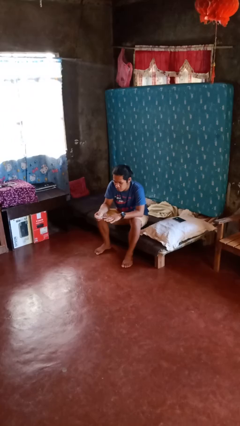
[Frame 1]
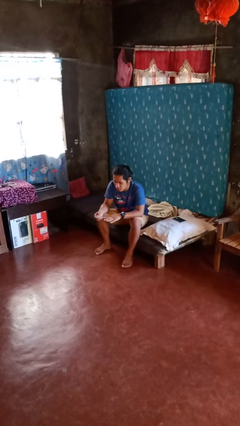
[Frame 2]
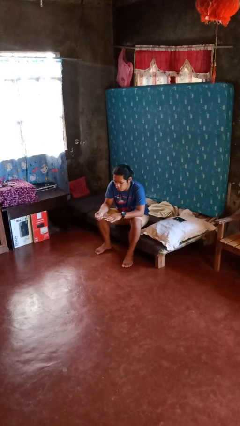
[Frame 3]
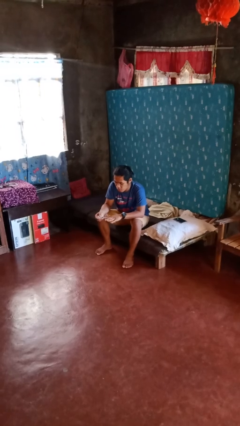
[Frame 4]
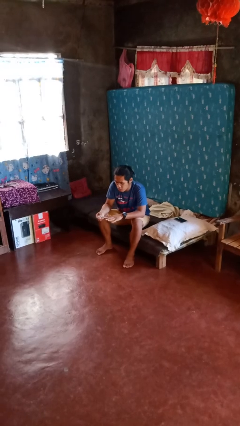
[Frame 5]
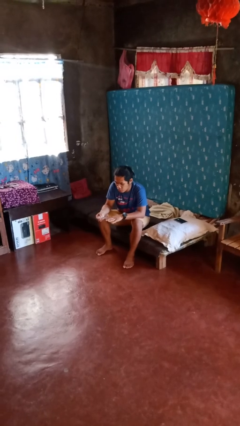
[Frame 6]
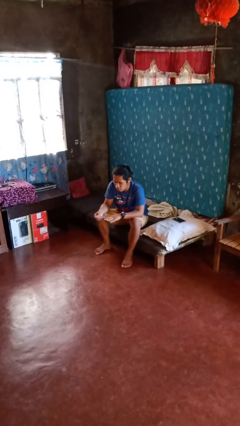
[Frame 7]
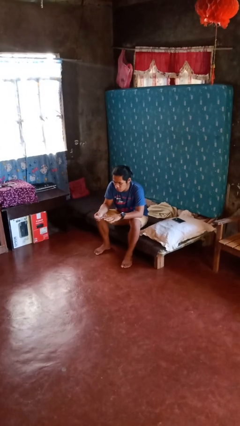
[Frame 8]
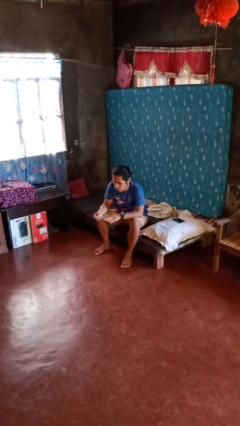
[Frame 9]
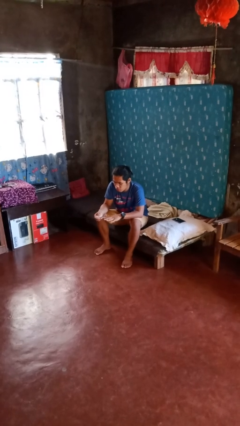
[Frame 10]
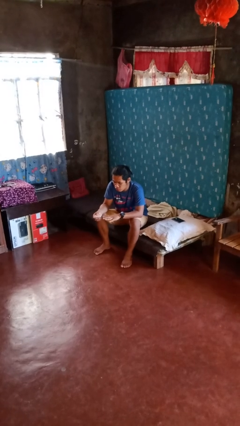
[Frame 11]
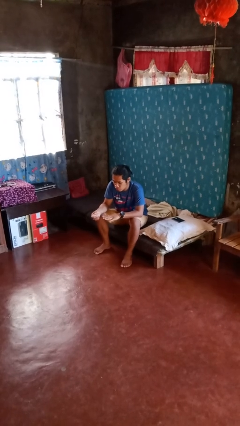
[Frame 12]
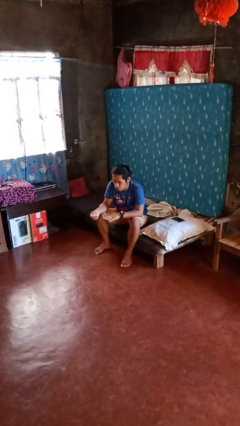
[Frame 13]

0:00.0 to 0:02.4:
person clips fingernails

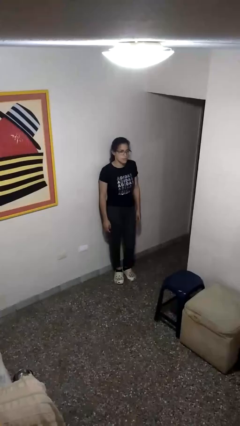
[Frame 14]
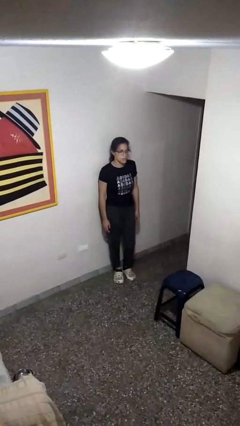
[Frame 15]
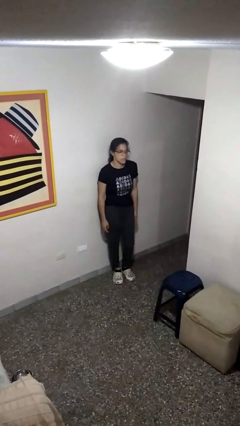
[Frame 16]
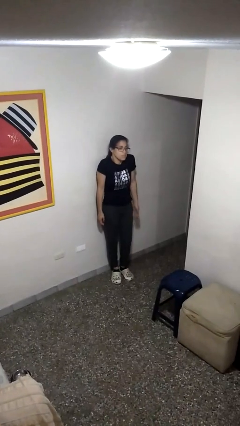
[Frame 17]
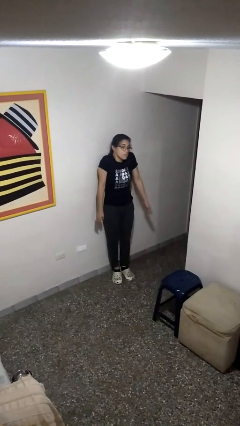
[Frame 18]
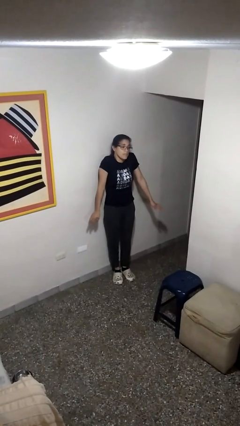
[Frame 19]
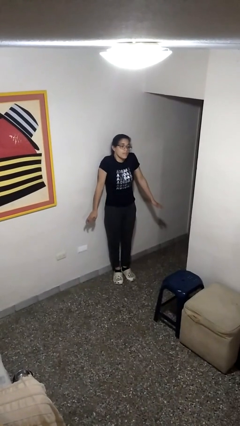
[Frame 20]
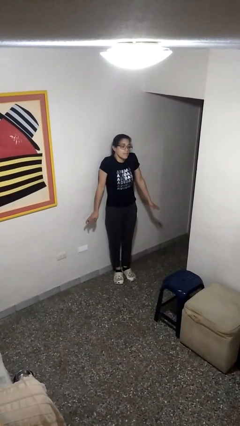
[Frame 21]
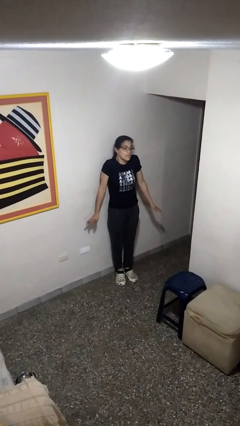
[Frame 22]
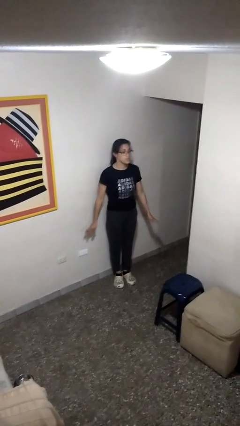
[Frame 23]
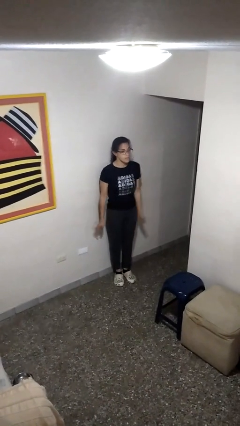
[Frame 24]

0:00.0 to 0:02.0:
person shrugs

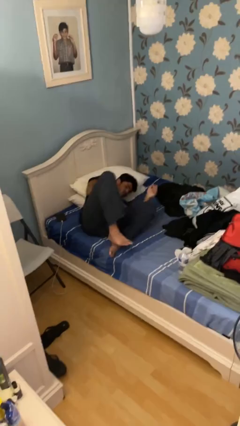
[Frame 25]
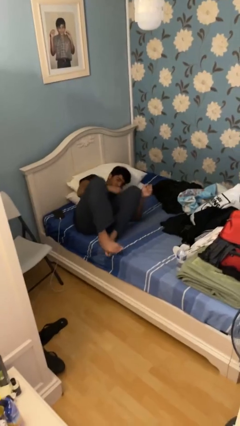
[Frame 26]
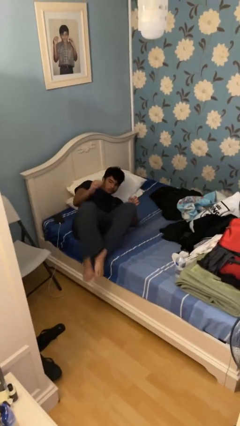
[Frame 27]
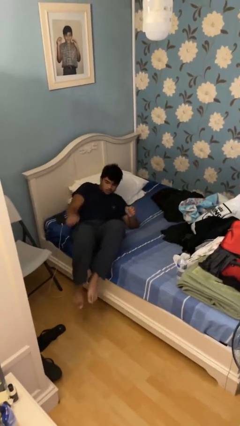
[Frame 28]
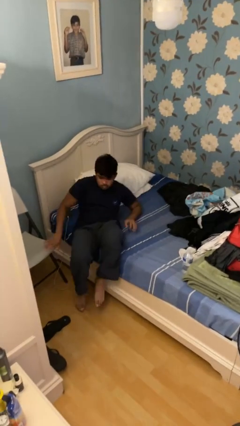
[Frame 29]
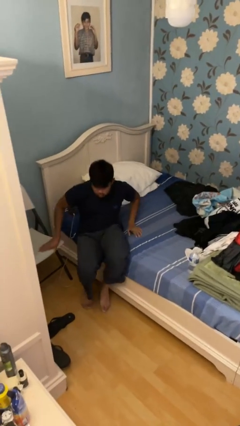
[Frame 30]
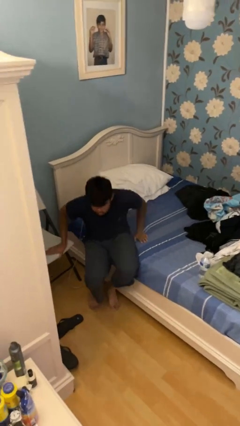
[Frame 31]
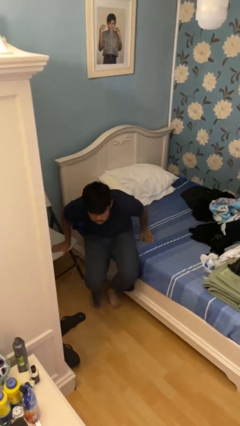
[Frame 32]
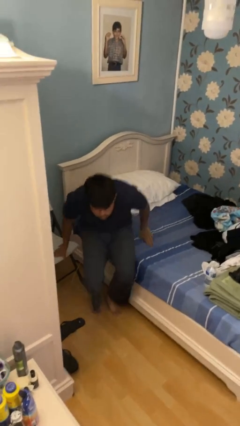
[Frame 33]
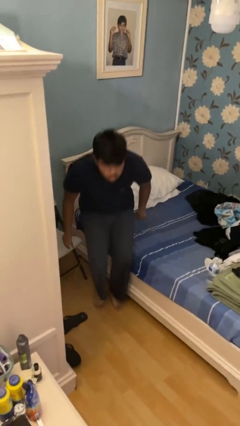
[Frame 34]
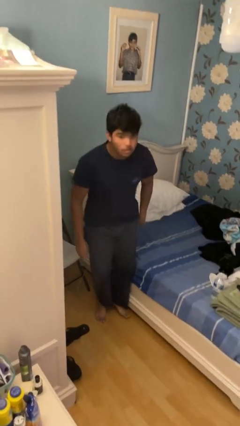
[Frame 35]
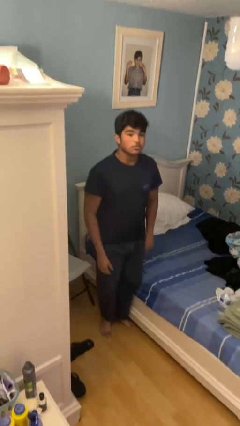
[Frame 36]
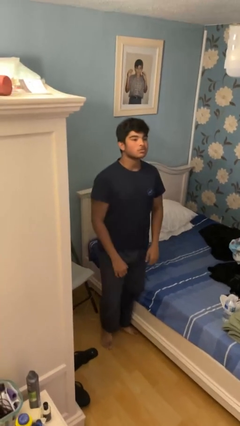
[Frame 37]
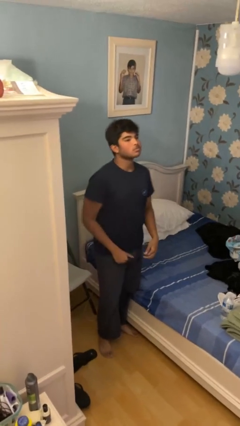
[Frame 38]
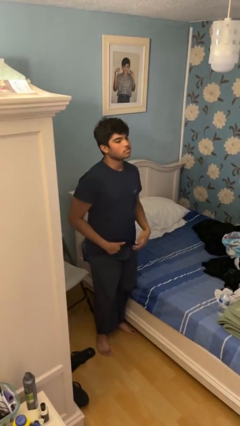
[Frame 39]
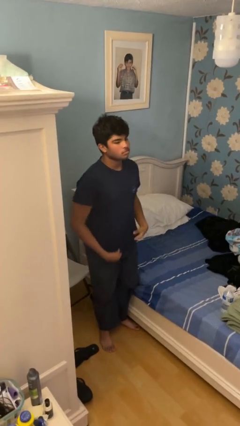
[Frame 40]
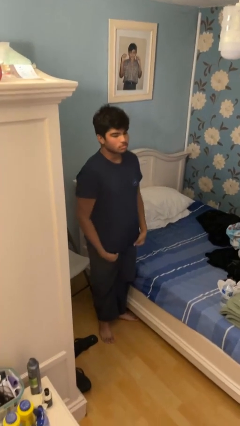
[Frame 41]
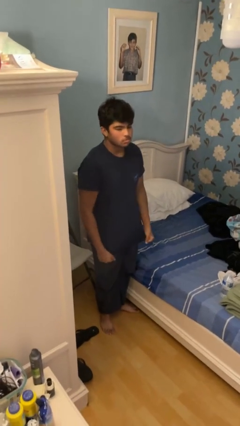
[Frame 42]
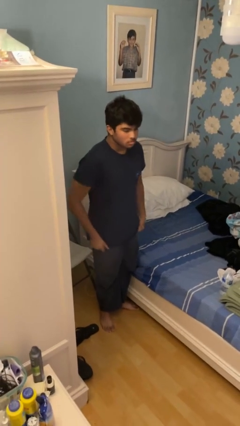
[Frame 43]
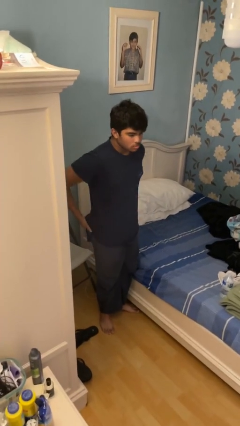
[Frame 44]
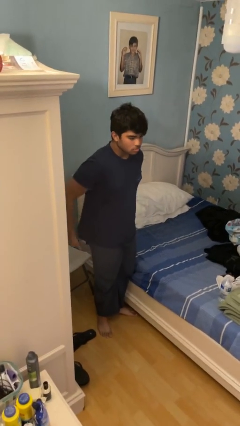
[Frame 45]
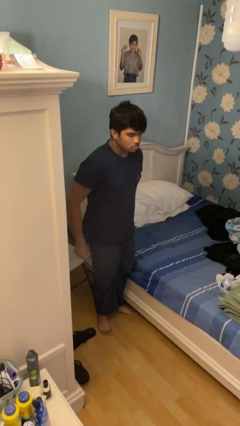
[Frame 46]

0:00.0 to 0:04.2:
person stands up

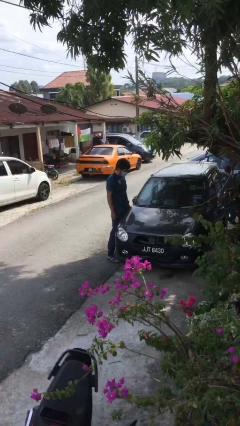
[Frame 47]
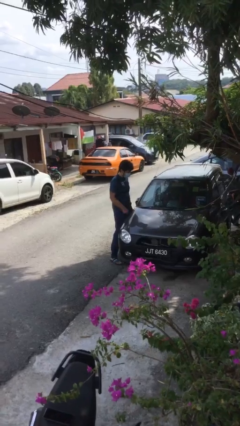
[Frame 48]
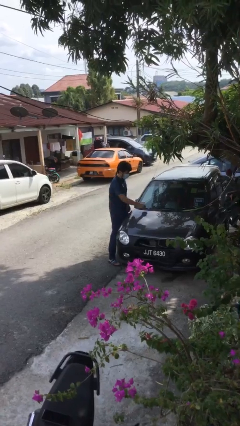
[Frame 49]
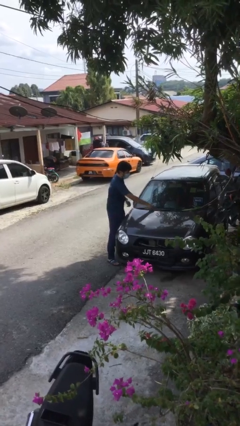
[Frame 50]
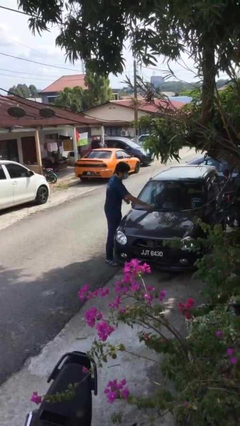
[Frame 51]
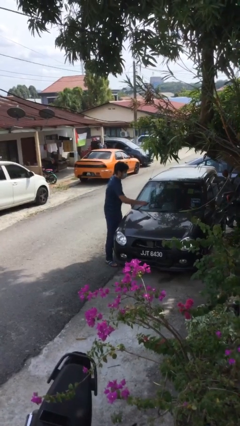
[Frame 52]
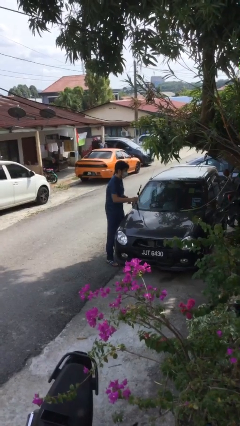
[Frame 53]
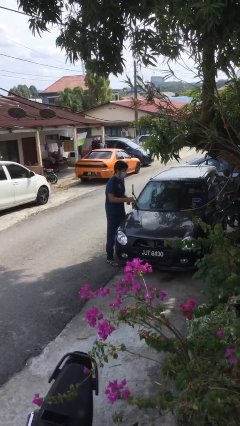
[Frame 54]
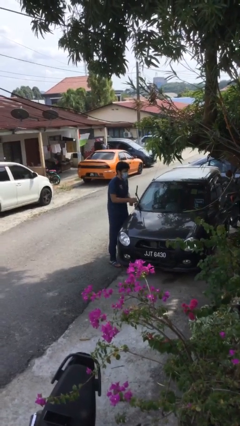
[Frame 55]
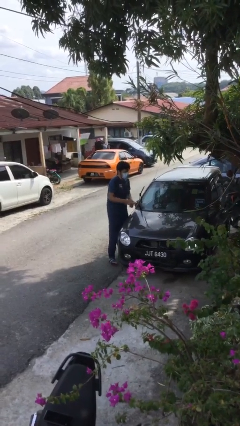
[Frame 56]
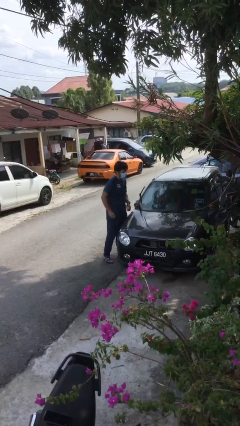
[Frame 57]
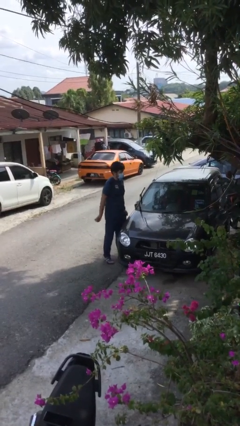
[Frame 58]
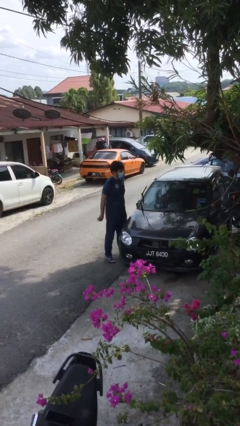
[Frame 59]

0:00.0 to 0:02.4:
person flips up car wipers

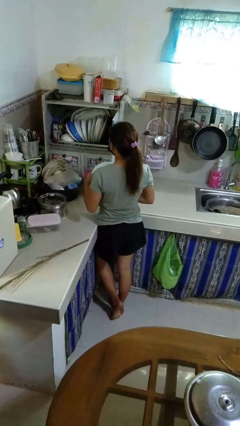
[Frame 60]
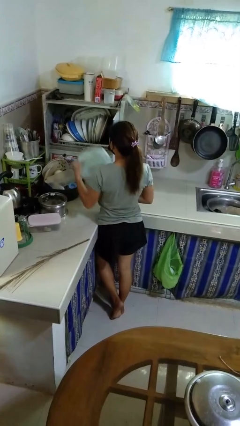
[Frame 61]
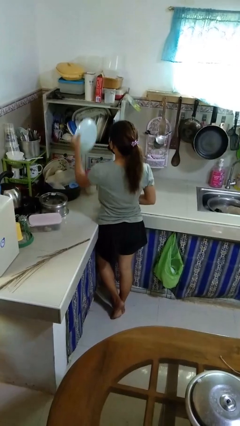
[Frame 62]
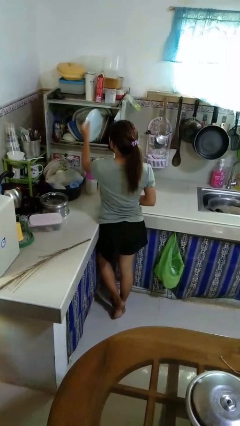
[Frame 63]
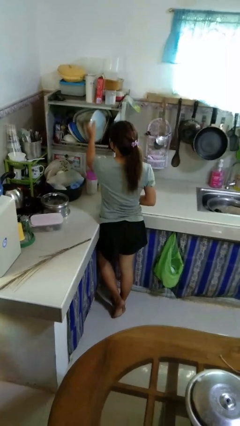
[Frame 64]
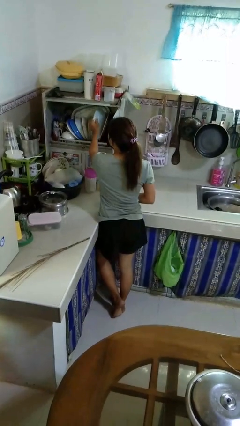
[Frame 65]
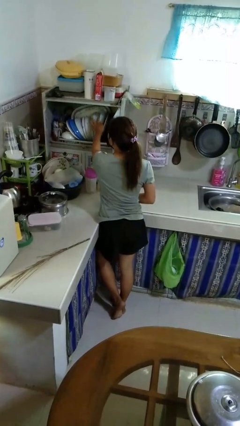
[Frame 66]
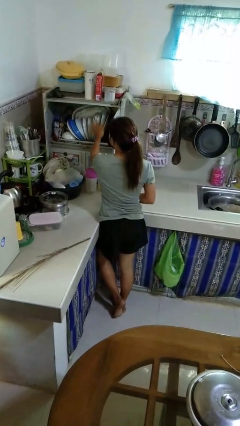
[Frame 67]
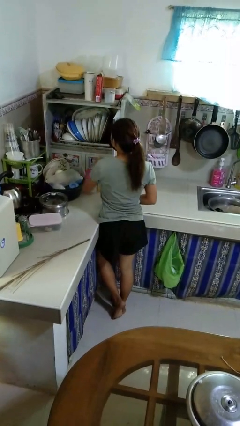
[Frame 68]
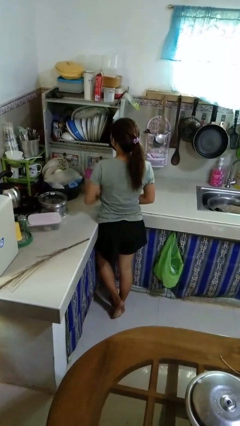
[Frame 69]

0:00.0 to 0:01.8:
person puts object into kitchen drawer

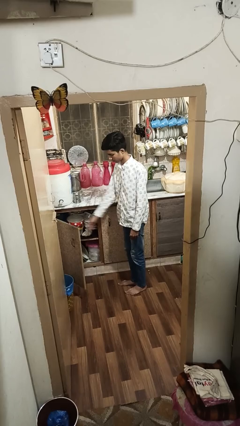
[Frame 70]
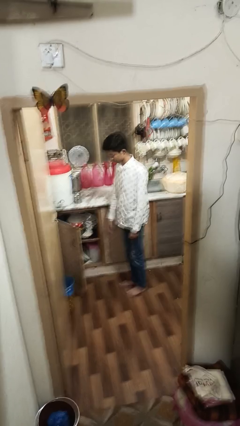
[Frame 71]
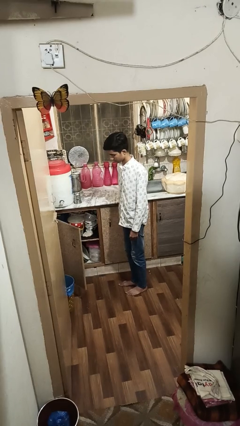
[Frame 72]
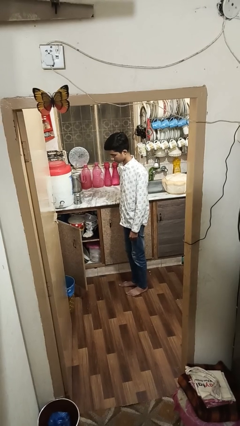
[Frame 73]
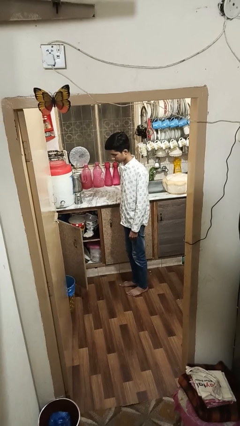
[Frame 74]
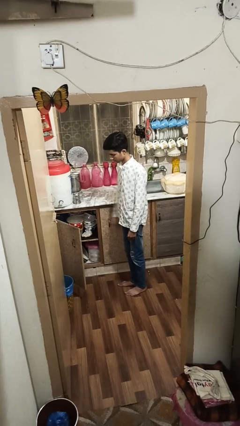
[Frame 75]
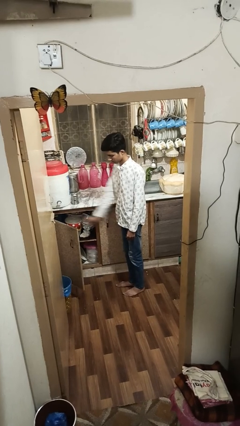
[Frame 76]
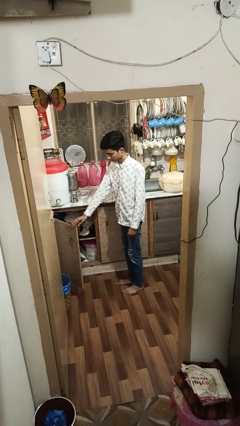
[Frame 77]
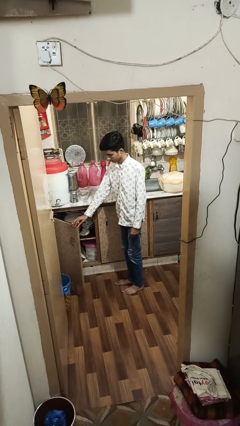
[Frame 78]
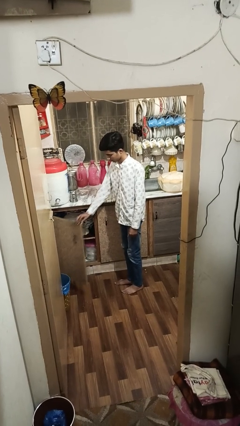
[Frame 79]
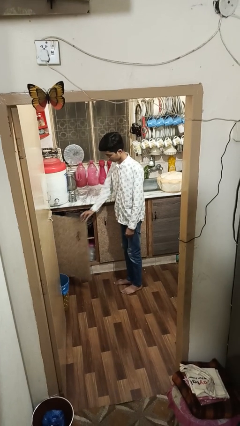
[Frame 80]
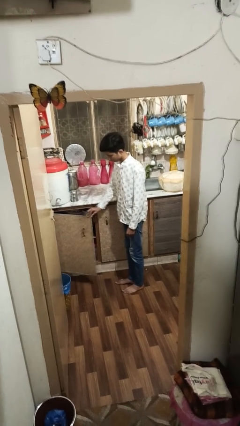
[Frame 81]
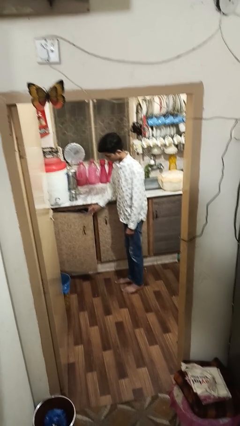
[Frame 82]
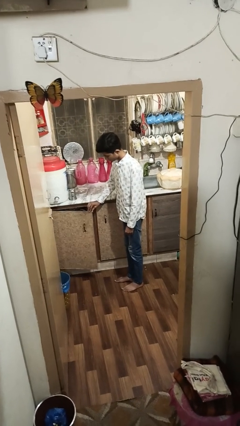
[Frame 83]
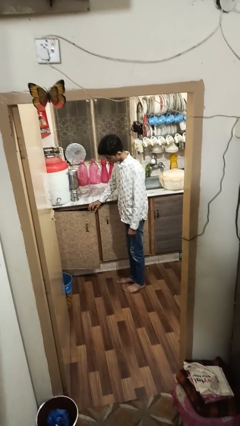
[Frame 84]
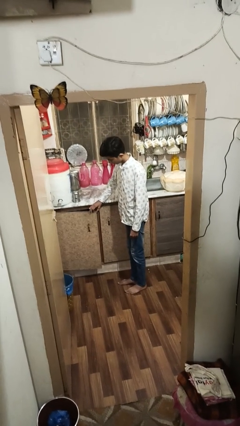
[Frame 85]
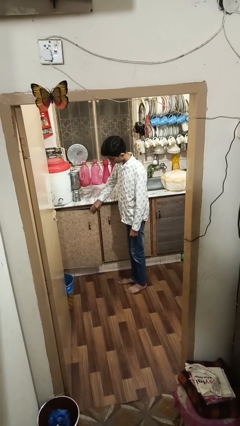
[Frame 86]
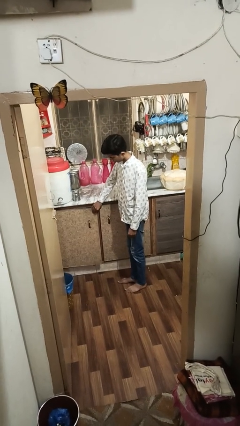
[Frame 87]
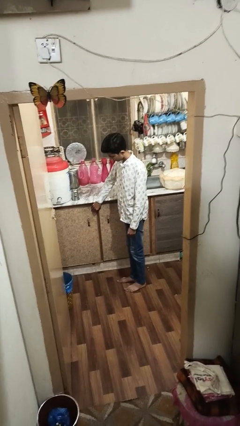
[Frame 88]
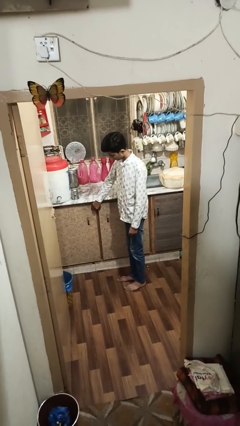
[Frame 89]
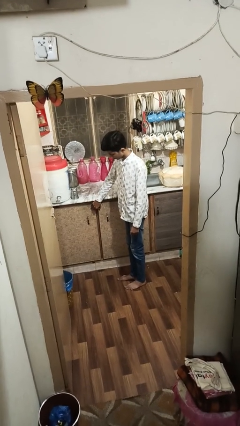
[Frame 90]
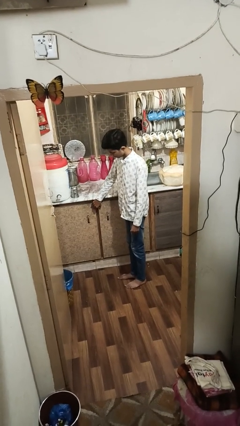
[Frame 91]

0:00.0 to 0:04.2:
person closes cabinet
